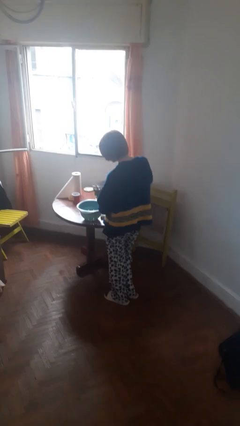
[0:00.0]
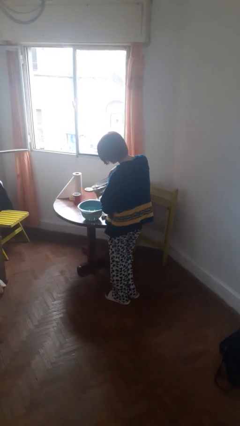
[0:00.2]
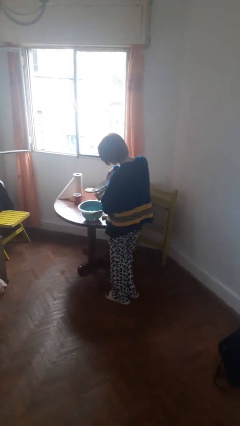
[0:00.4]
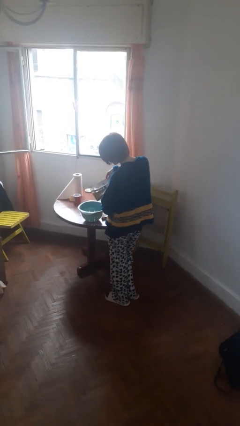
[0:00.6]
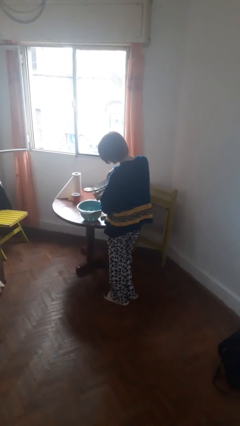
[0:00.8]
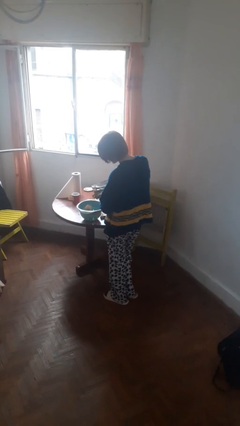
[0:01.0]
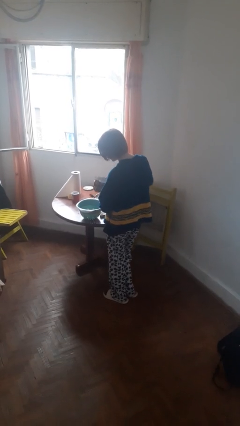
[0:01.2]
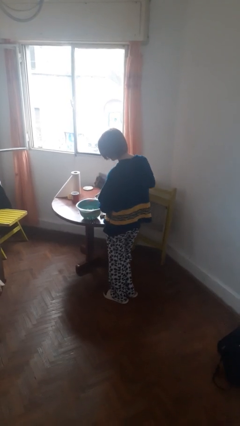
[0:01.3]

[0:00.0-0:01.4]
person pours into bowl

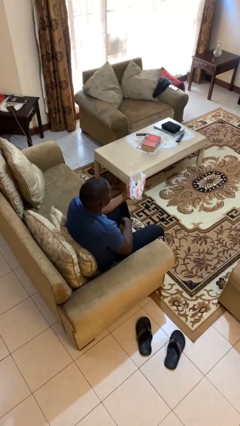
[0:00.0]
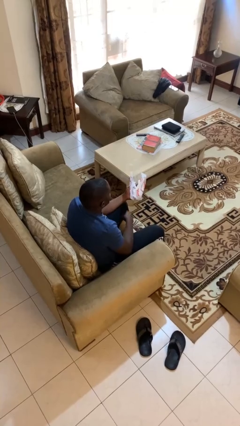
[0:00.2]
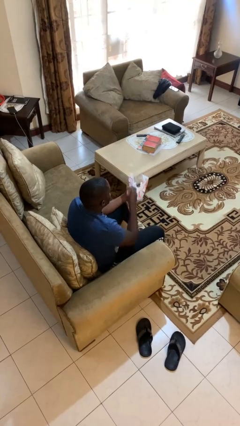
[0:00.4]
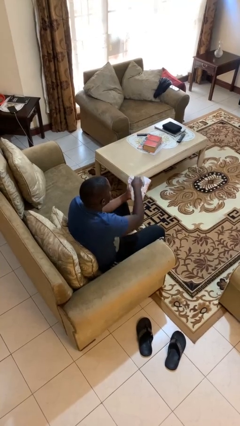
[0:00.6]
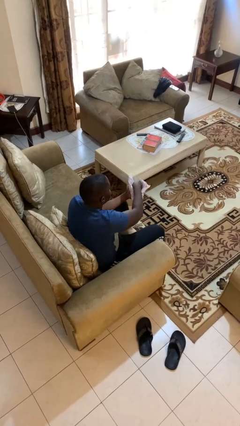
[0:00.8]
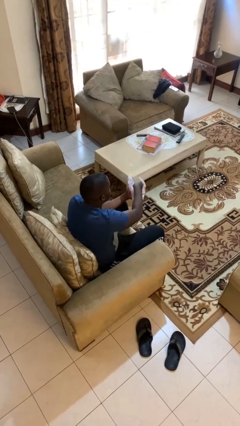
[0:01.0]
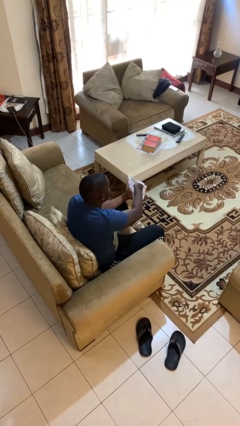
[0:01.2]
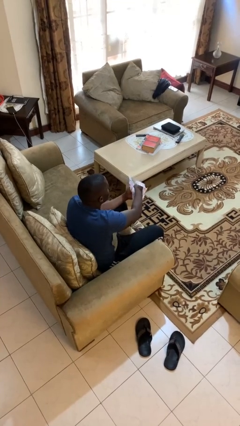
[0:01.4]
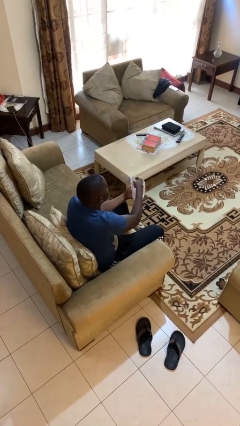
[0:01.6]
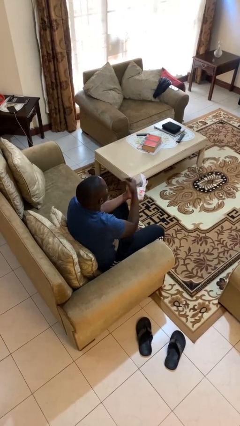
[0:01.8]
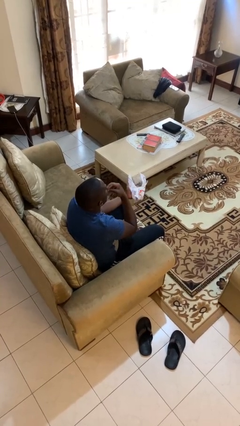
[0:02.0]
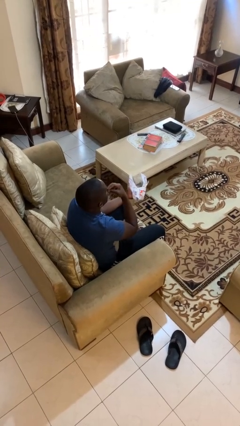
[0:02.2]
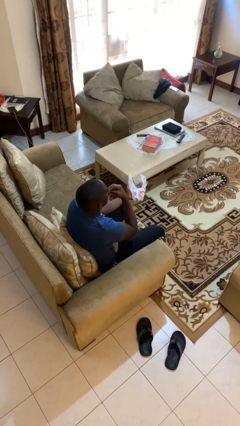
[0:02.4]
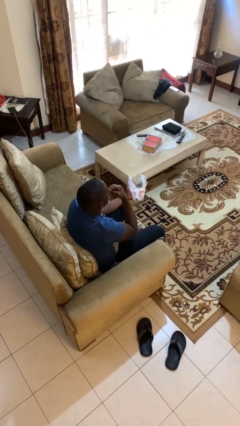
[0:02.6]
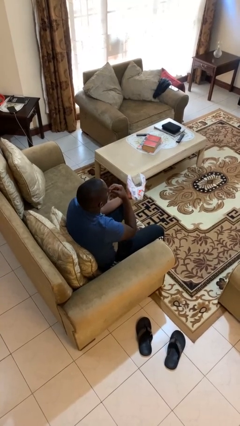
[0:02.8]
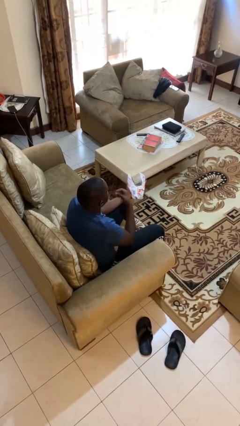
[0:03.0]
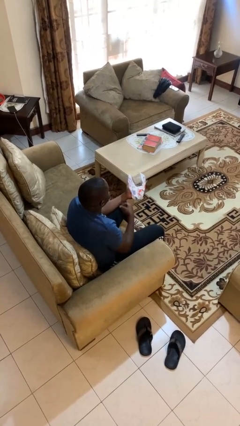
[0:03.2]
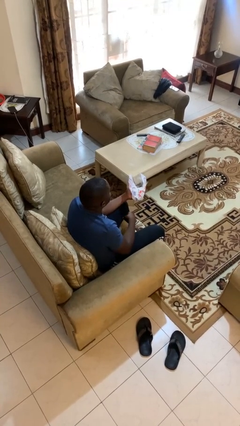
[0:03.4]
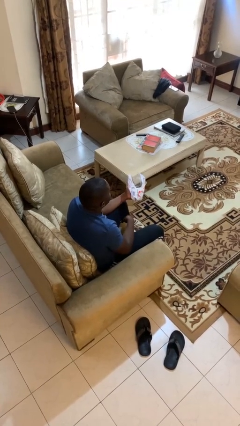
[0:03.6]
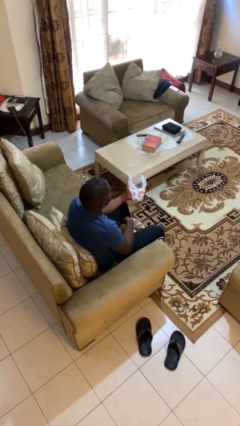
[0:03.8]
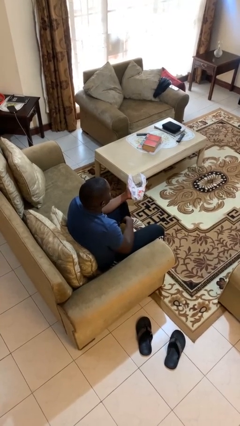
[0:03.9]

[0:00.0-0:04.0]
person eats snack from bag

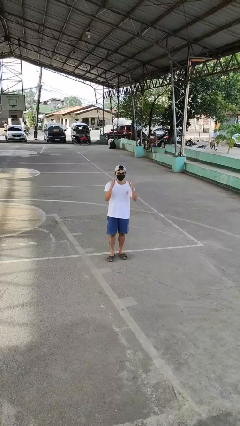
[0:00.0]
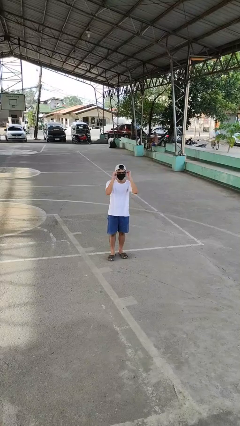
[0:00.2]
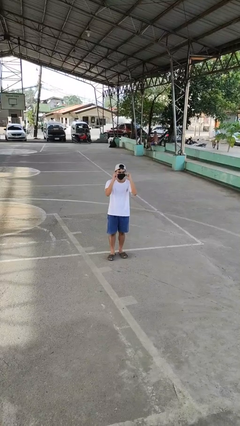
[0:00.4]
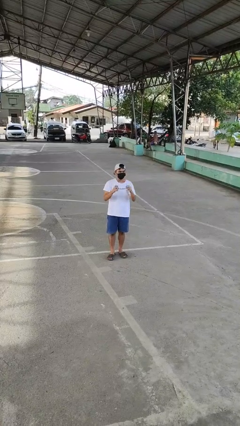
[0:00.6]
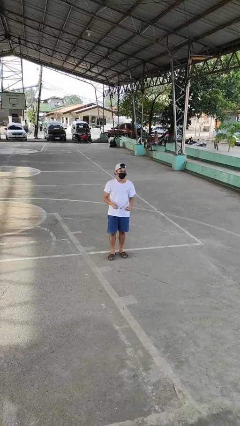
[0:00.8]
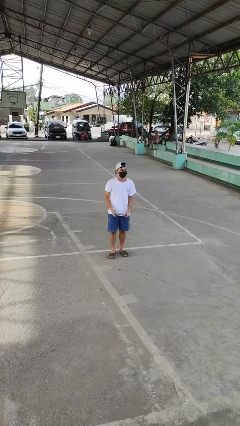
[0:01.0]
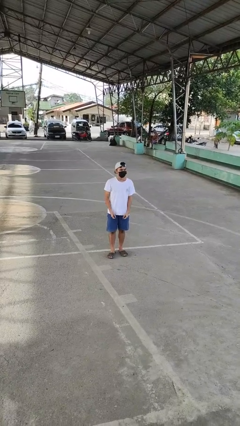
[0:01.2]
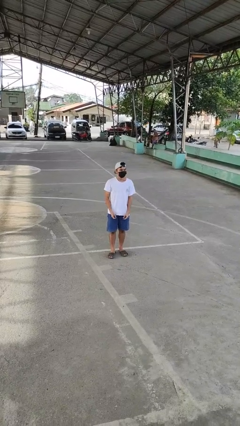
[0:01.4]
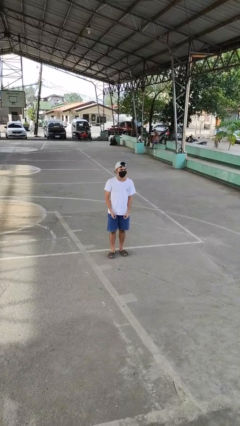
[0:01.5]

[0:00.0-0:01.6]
person takes off glasses

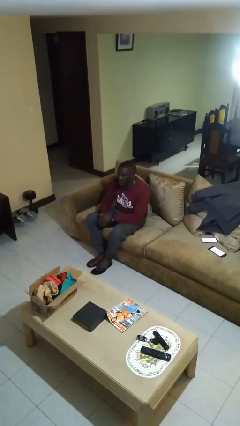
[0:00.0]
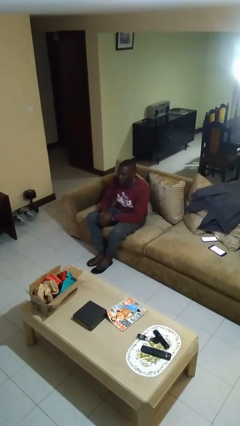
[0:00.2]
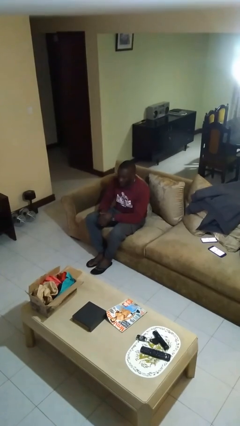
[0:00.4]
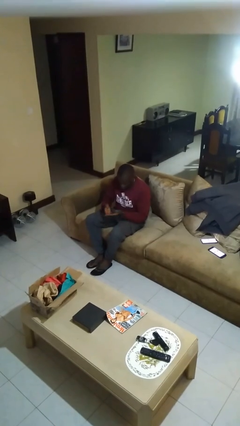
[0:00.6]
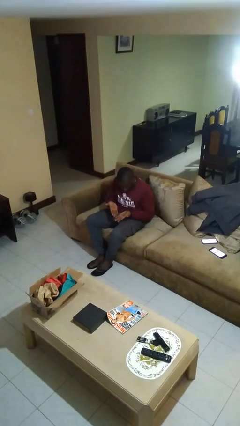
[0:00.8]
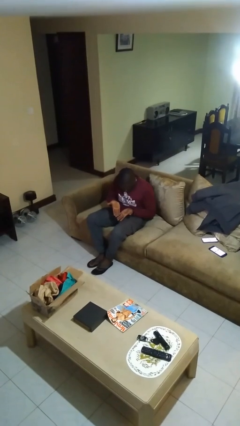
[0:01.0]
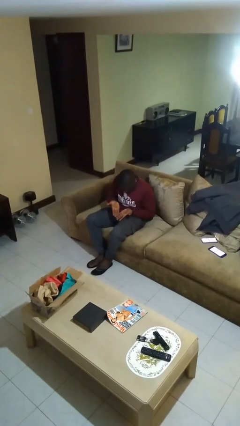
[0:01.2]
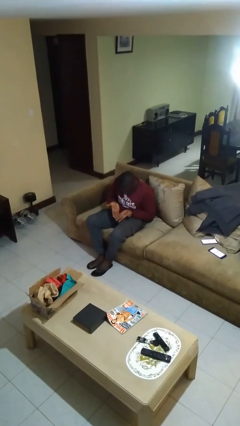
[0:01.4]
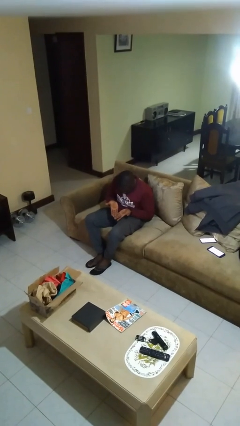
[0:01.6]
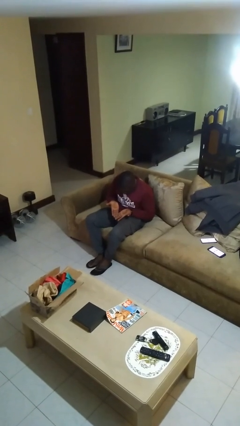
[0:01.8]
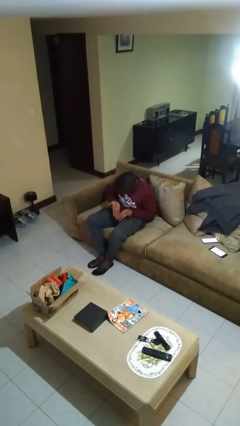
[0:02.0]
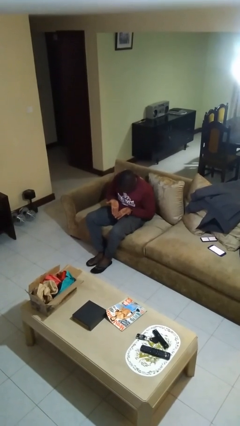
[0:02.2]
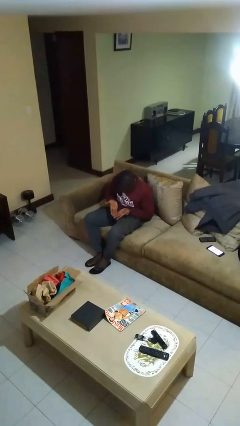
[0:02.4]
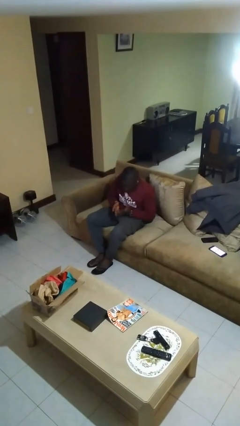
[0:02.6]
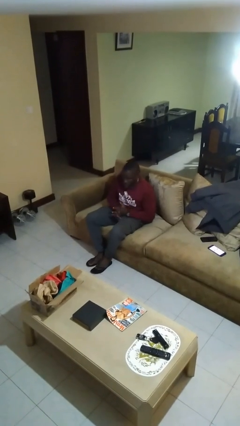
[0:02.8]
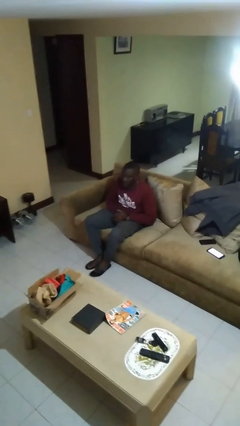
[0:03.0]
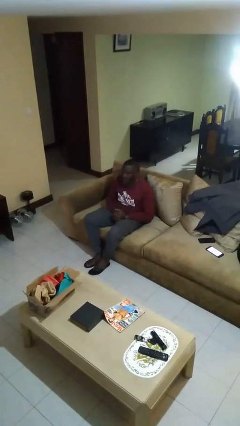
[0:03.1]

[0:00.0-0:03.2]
person looks at hands in lap

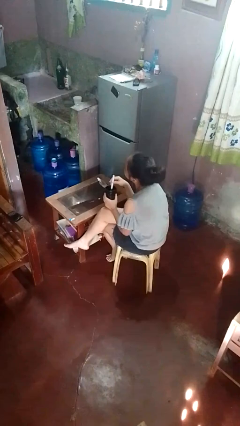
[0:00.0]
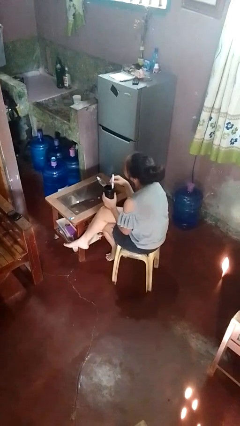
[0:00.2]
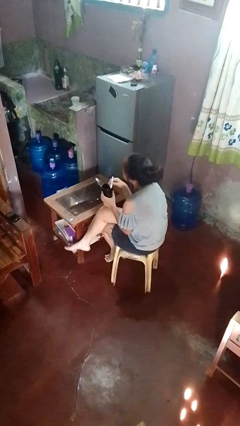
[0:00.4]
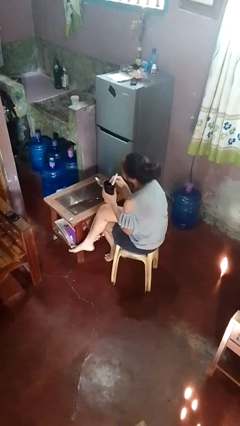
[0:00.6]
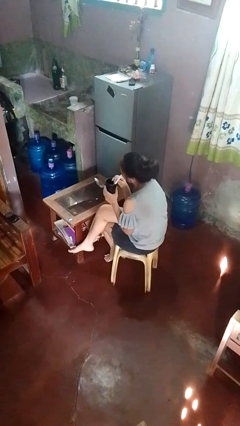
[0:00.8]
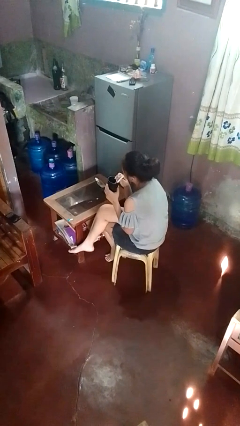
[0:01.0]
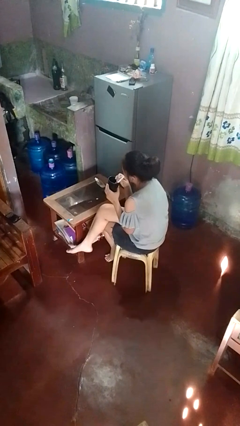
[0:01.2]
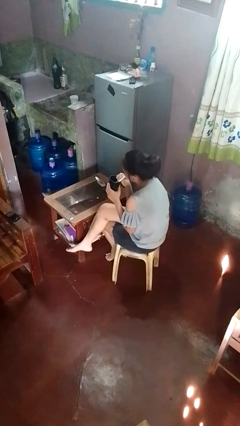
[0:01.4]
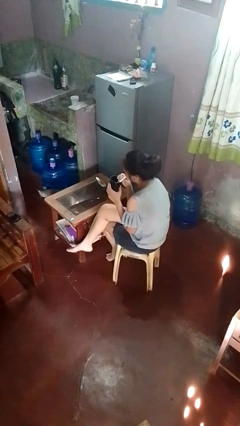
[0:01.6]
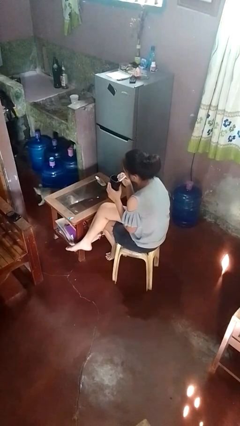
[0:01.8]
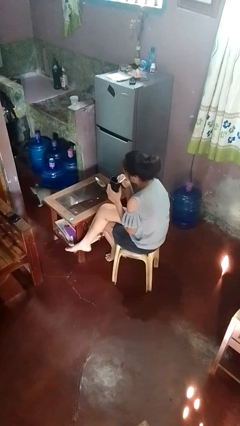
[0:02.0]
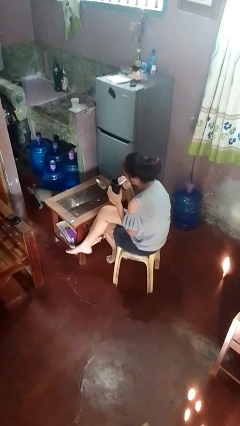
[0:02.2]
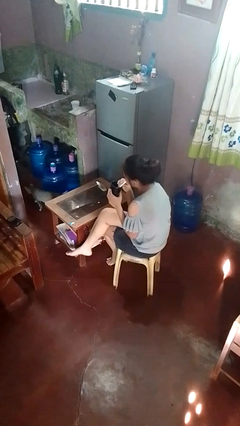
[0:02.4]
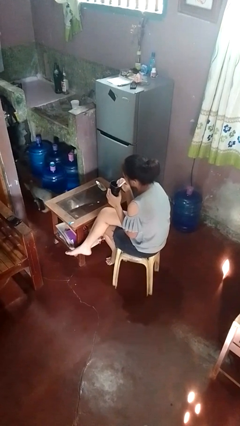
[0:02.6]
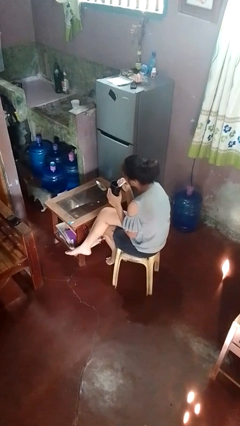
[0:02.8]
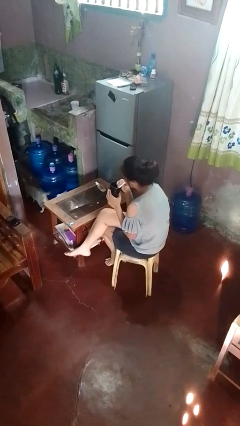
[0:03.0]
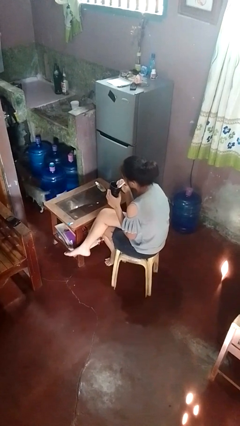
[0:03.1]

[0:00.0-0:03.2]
person drinks from straw

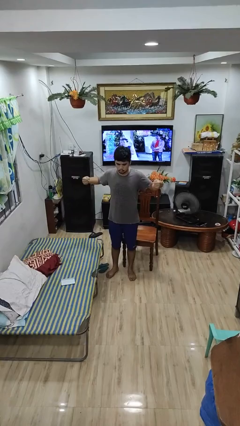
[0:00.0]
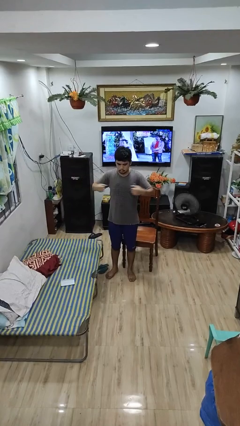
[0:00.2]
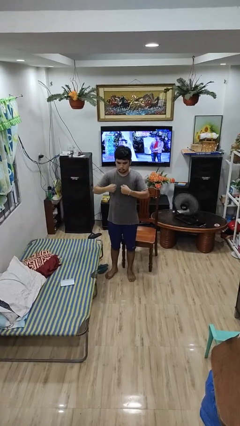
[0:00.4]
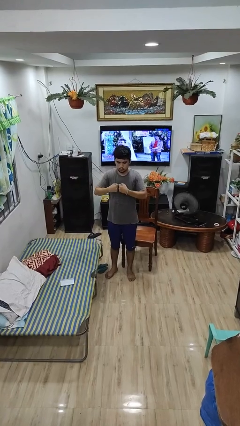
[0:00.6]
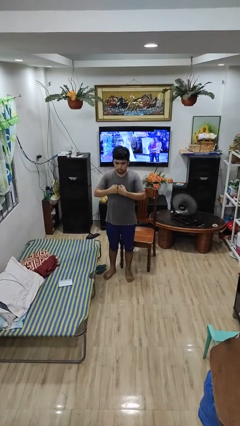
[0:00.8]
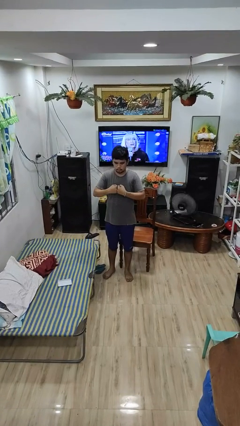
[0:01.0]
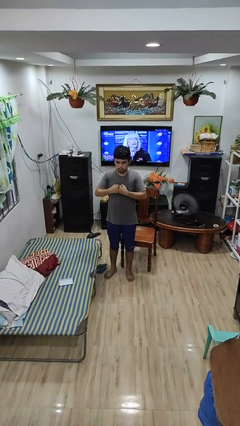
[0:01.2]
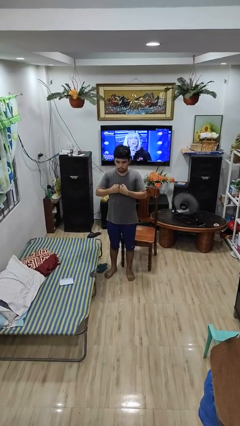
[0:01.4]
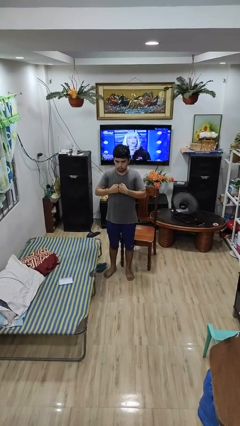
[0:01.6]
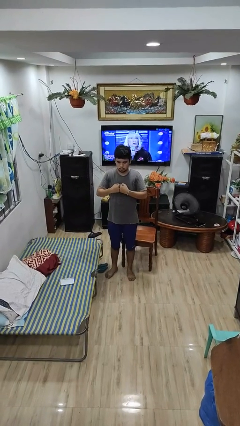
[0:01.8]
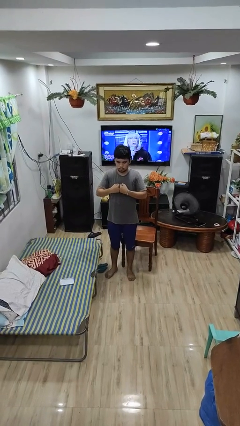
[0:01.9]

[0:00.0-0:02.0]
person gestures zoom out

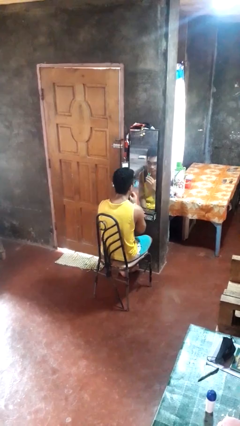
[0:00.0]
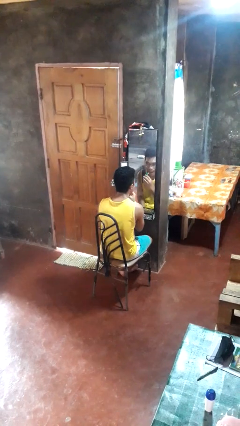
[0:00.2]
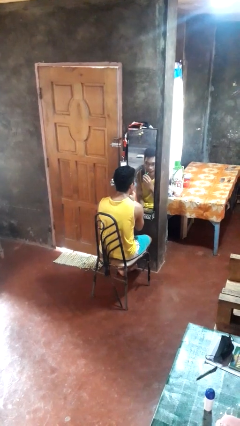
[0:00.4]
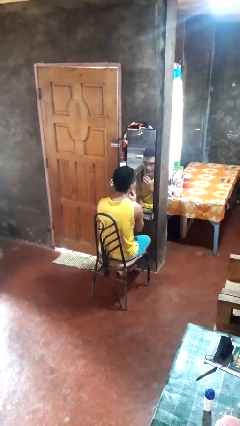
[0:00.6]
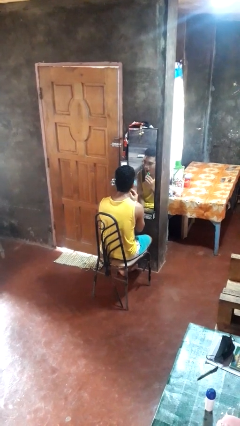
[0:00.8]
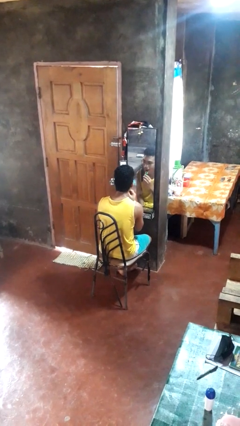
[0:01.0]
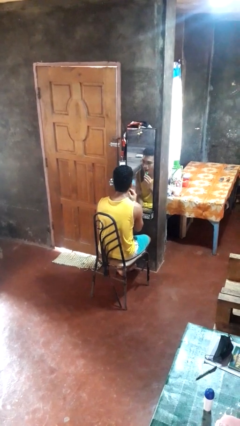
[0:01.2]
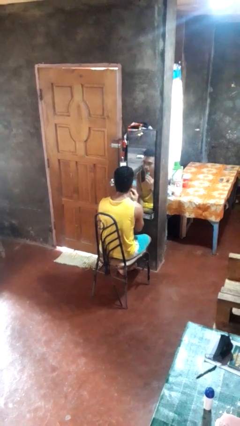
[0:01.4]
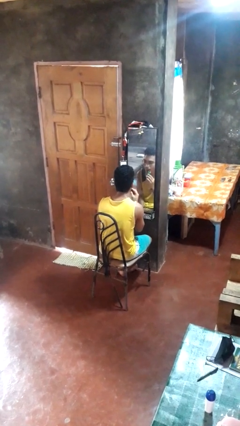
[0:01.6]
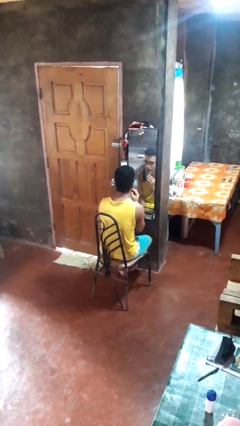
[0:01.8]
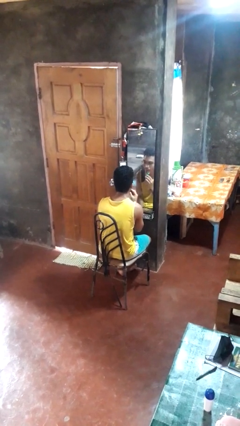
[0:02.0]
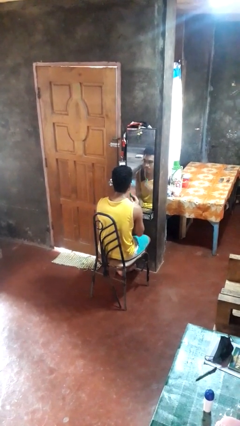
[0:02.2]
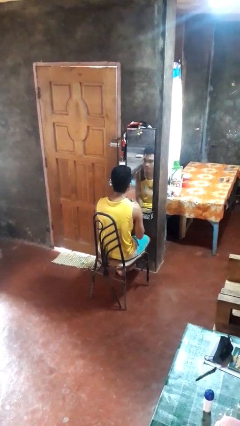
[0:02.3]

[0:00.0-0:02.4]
person applies lip makeup
